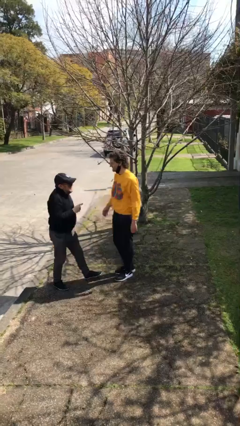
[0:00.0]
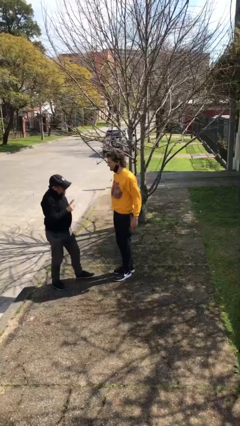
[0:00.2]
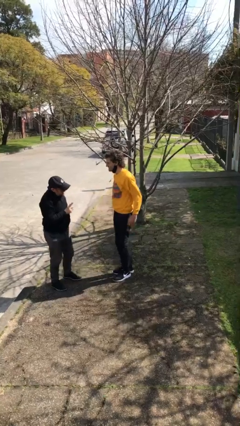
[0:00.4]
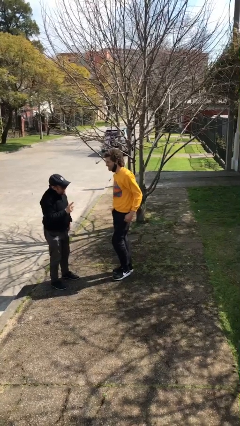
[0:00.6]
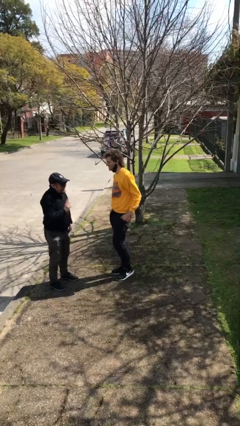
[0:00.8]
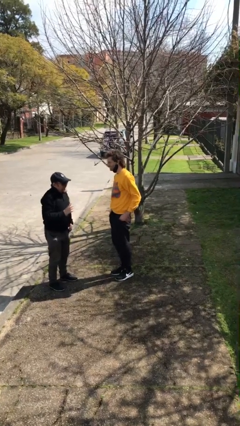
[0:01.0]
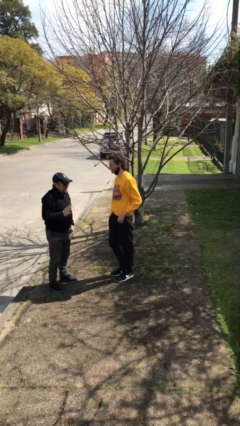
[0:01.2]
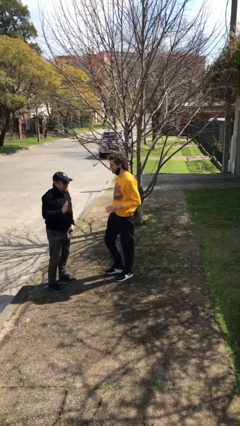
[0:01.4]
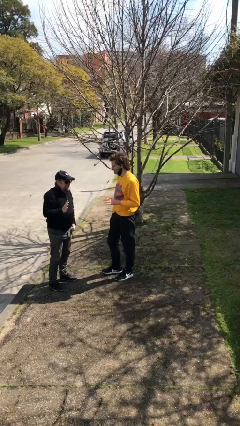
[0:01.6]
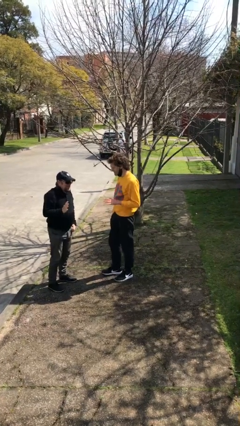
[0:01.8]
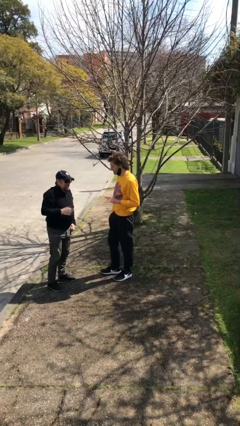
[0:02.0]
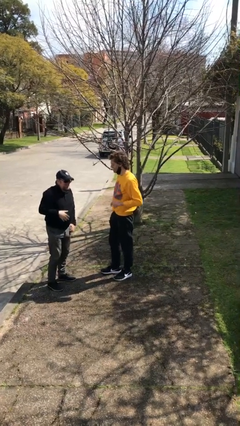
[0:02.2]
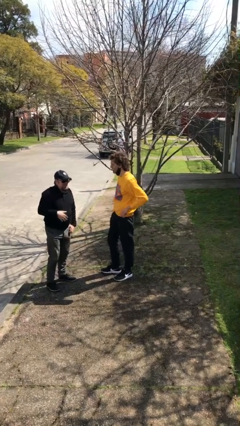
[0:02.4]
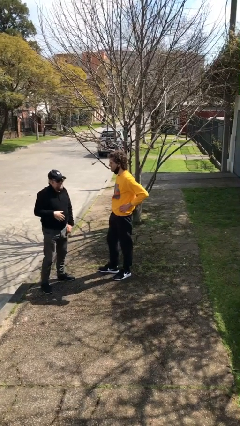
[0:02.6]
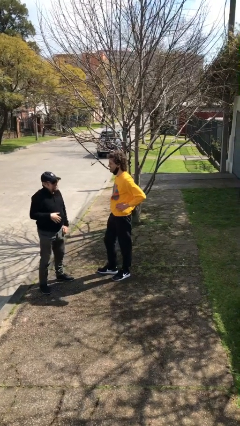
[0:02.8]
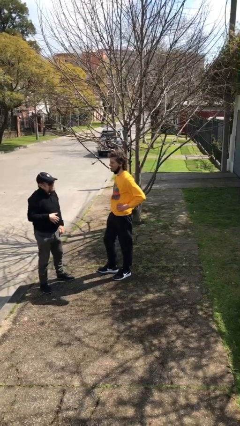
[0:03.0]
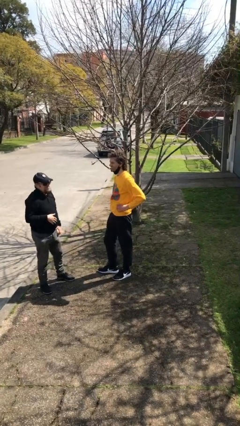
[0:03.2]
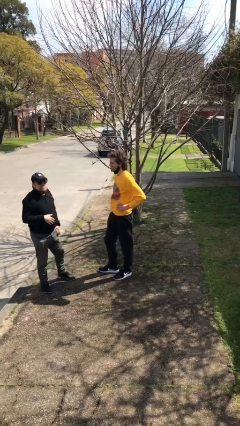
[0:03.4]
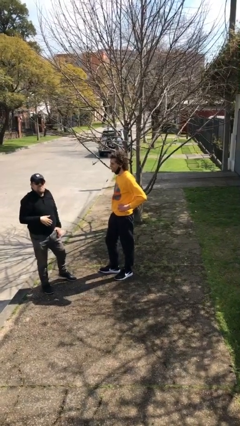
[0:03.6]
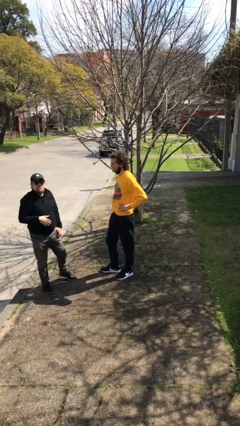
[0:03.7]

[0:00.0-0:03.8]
person talks to person

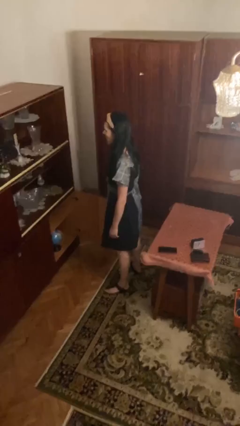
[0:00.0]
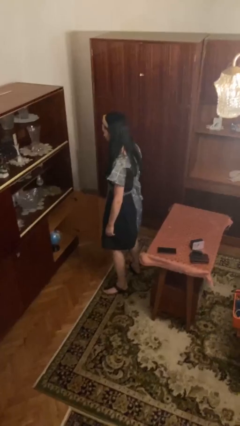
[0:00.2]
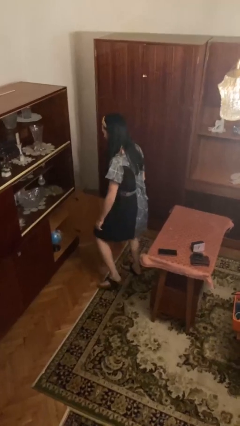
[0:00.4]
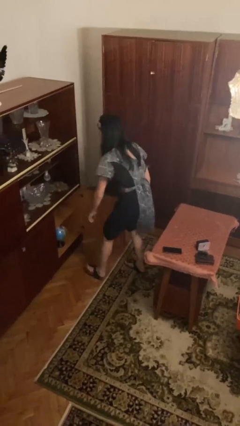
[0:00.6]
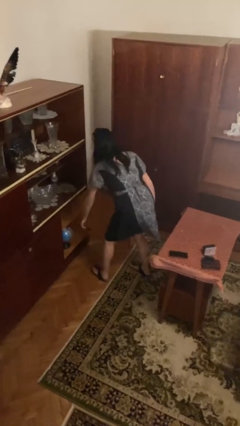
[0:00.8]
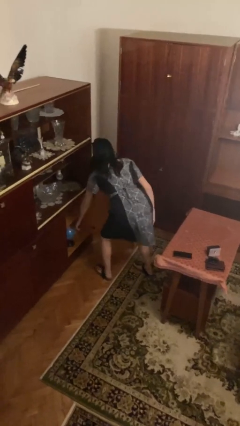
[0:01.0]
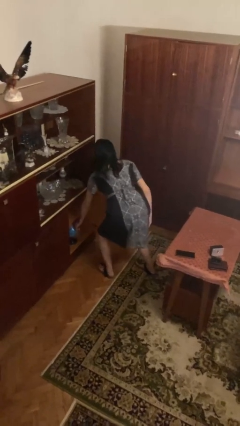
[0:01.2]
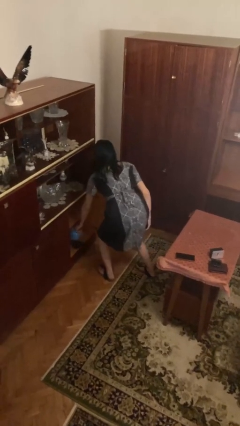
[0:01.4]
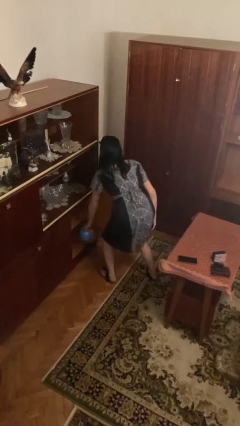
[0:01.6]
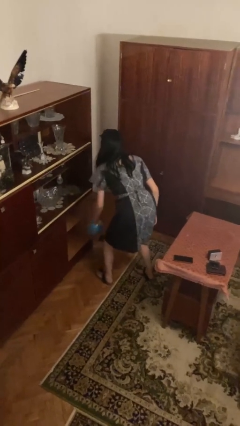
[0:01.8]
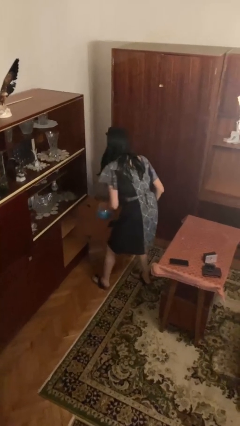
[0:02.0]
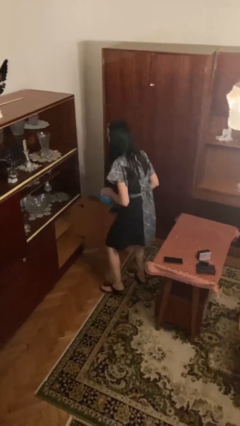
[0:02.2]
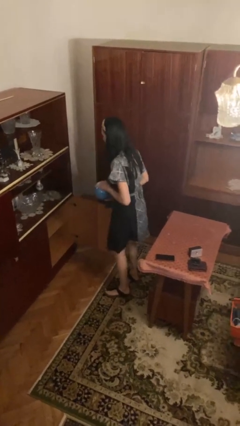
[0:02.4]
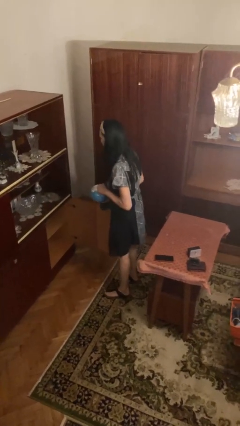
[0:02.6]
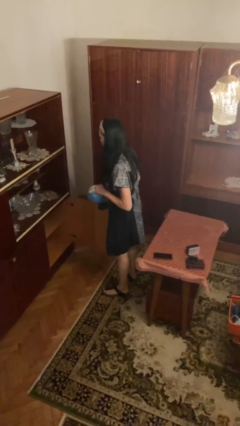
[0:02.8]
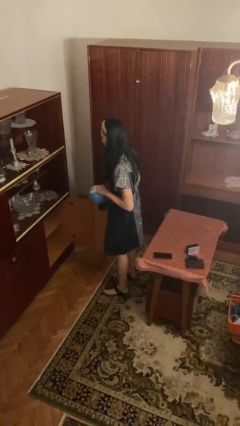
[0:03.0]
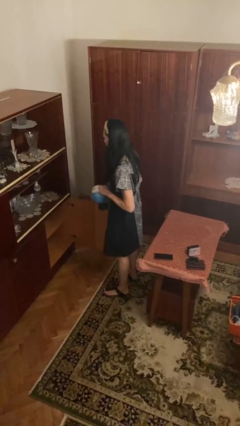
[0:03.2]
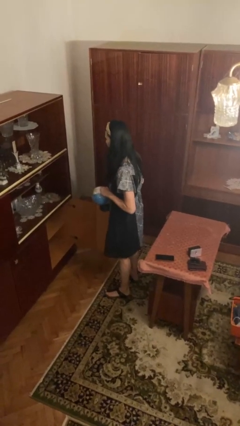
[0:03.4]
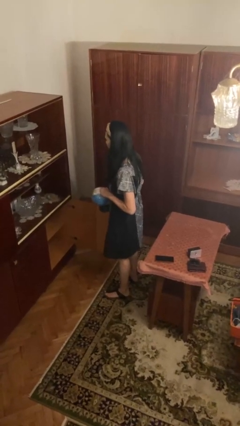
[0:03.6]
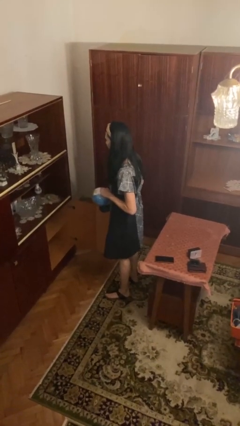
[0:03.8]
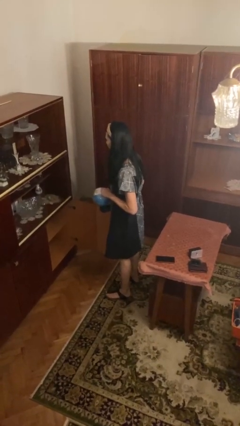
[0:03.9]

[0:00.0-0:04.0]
person picks up object from cabinet

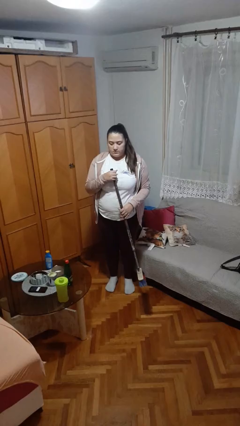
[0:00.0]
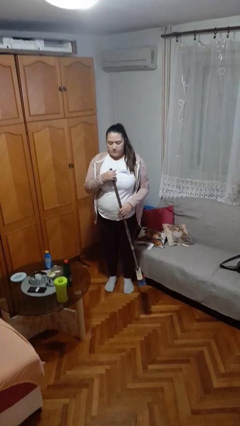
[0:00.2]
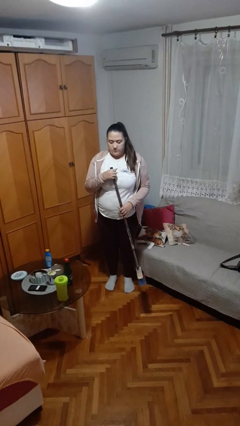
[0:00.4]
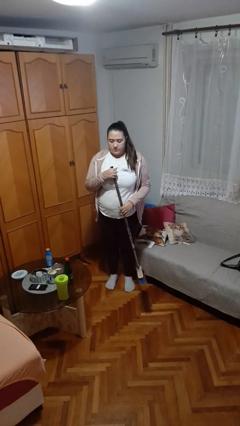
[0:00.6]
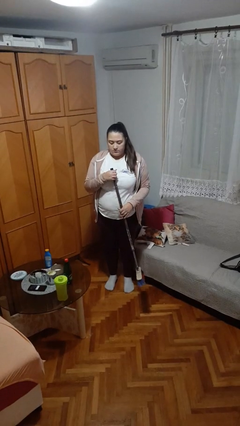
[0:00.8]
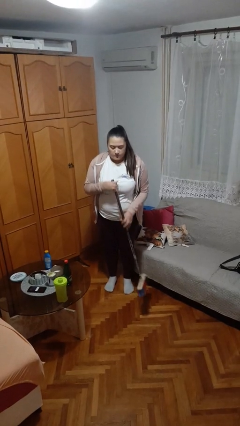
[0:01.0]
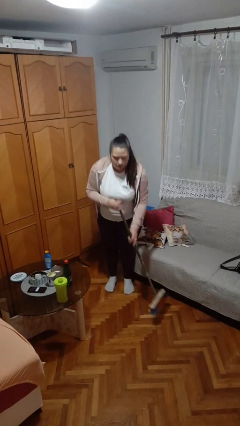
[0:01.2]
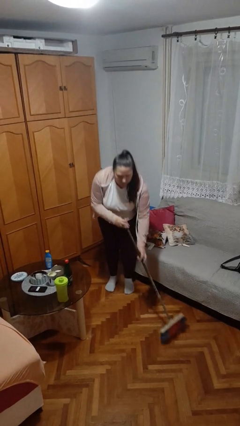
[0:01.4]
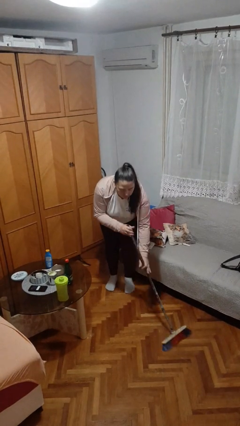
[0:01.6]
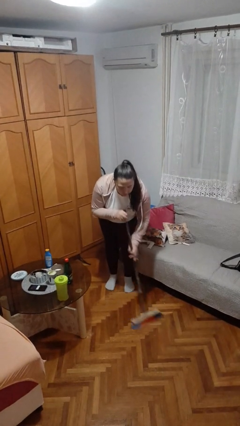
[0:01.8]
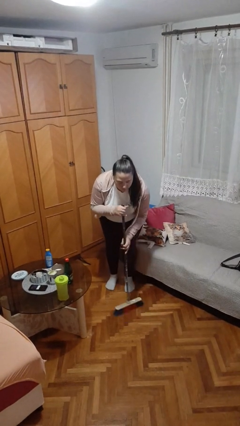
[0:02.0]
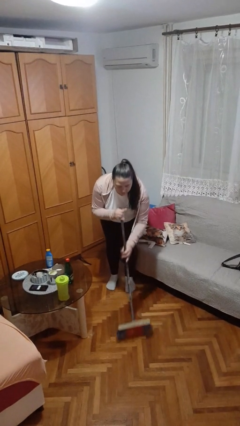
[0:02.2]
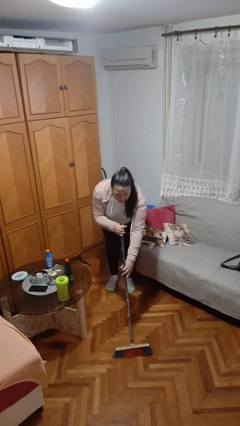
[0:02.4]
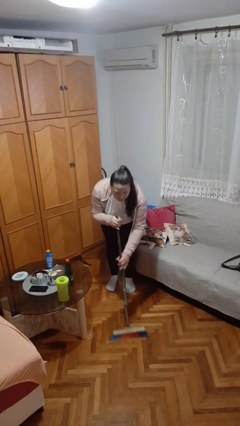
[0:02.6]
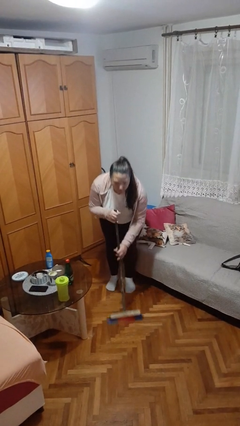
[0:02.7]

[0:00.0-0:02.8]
person sweeps floor

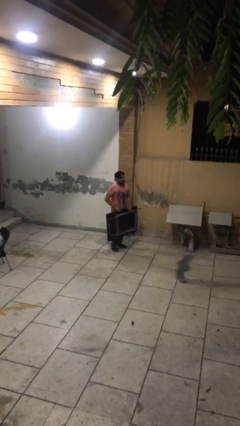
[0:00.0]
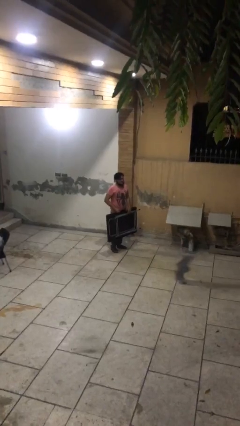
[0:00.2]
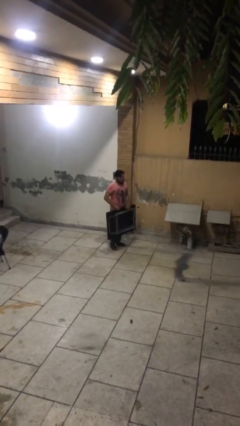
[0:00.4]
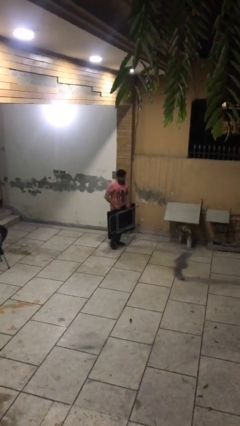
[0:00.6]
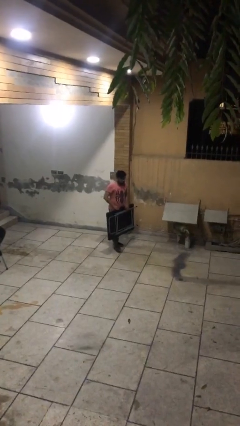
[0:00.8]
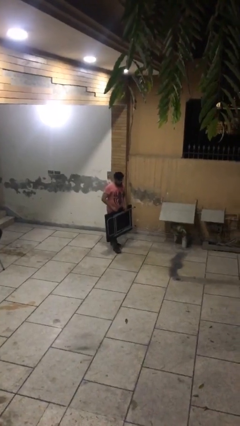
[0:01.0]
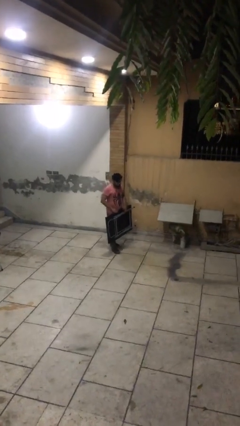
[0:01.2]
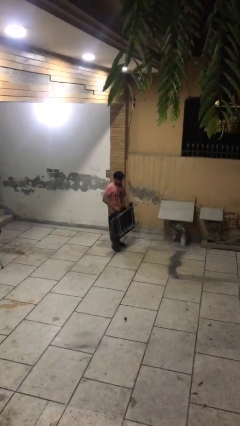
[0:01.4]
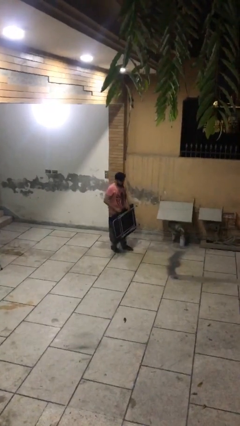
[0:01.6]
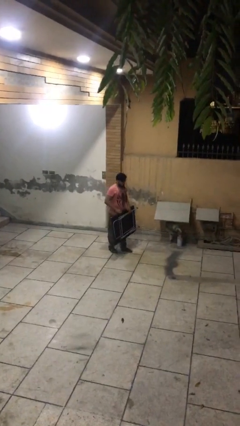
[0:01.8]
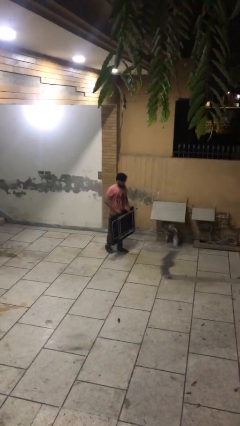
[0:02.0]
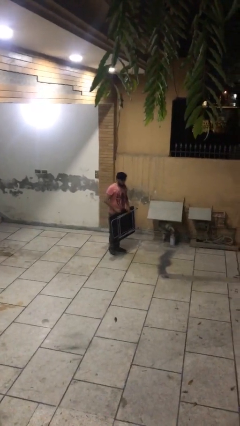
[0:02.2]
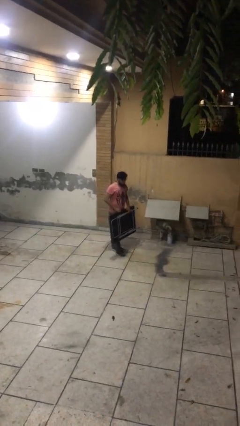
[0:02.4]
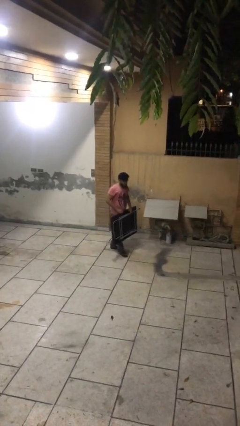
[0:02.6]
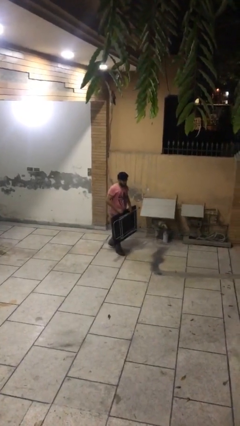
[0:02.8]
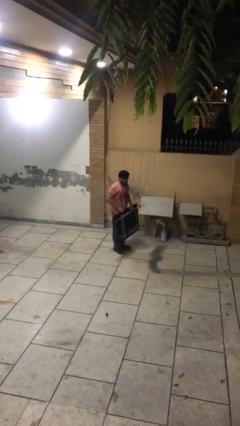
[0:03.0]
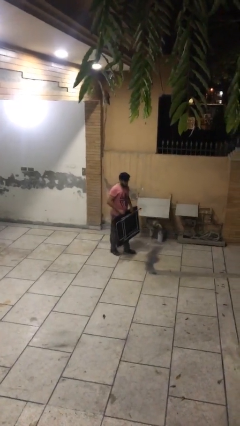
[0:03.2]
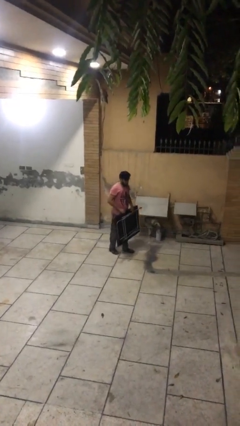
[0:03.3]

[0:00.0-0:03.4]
person carries heavy object

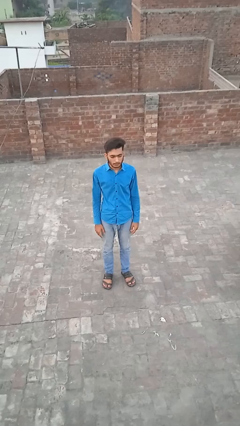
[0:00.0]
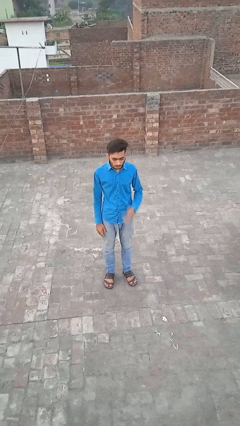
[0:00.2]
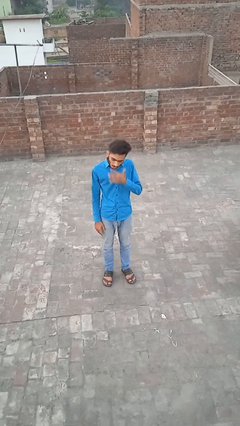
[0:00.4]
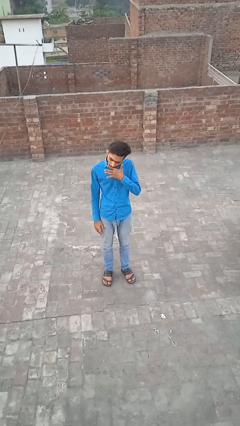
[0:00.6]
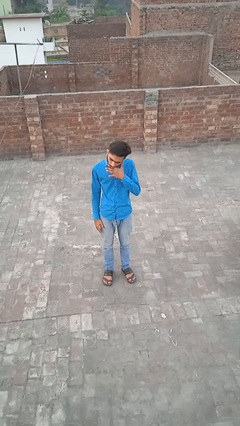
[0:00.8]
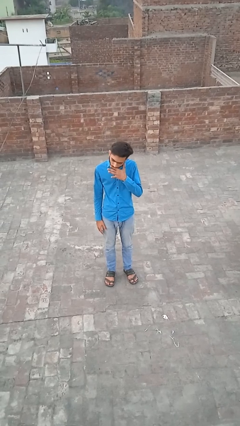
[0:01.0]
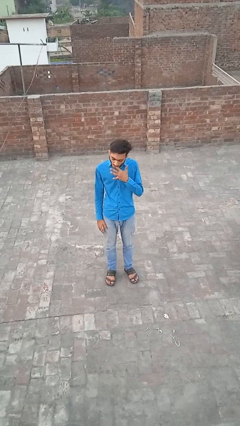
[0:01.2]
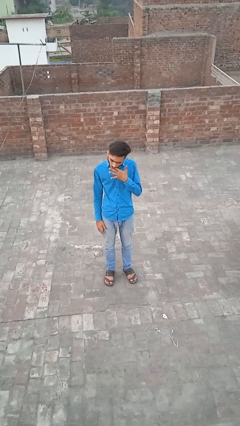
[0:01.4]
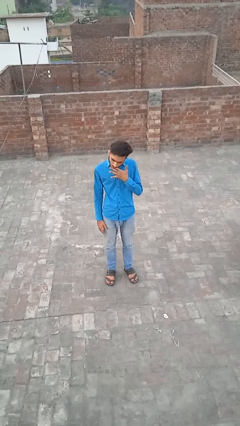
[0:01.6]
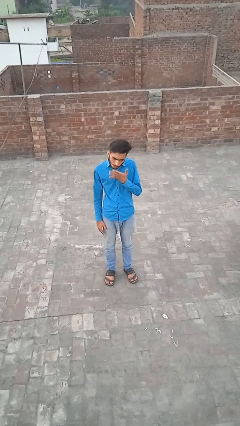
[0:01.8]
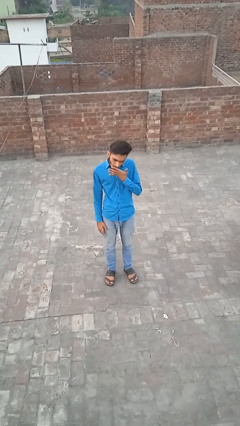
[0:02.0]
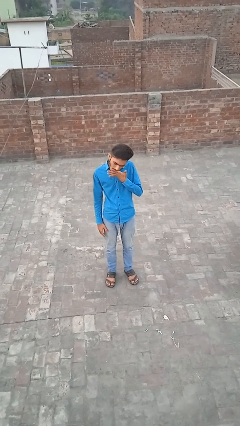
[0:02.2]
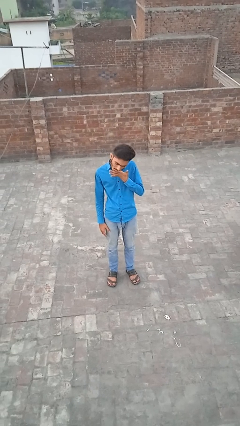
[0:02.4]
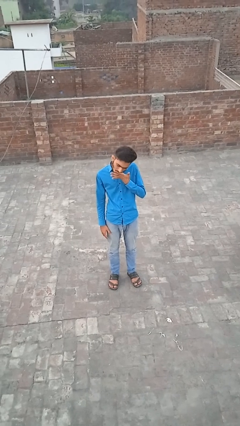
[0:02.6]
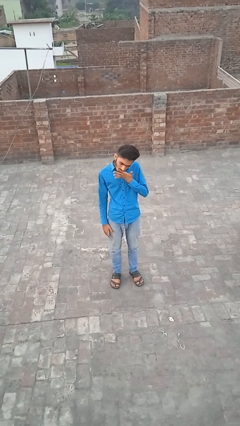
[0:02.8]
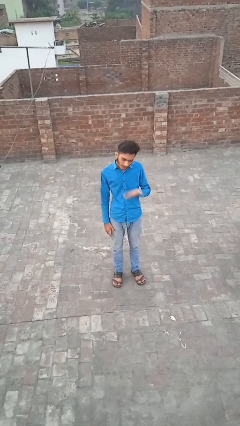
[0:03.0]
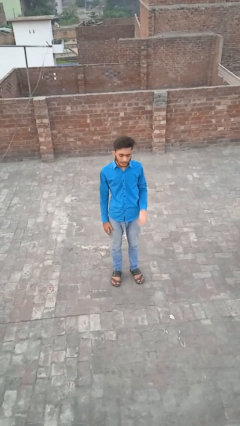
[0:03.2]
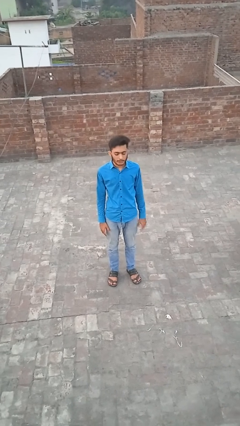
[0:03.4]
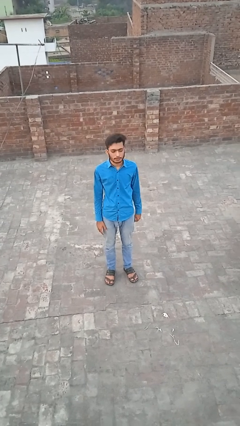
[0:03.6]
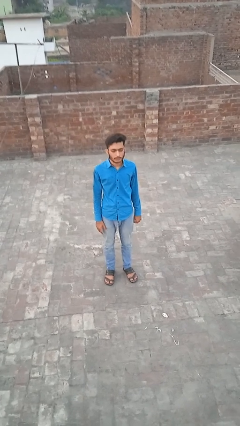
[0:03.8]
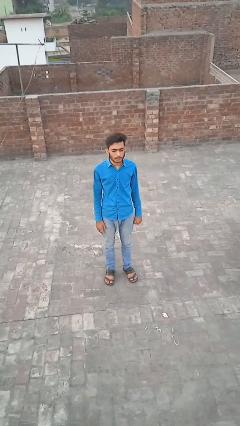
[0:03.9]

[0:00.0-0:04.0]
person licks fingers
